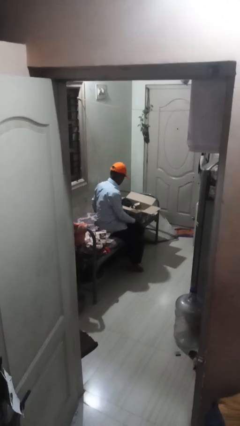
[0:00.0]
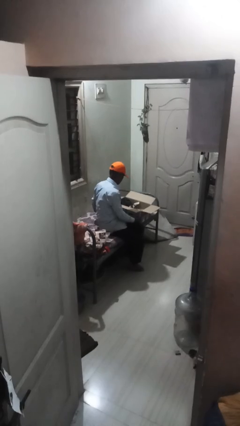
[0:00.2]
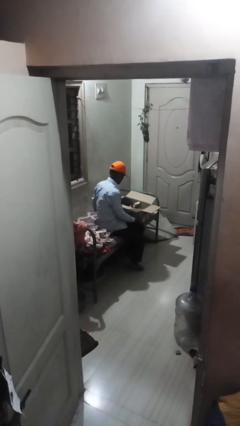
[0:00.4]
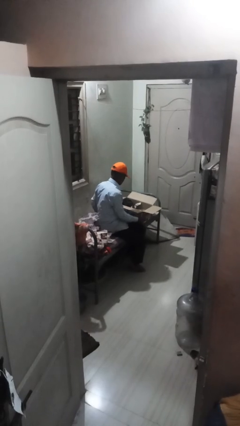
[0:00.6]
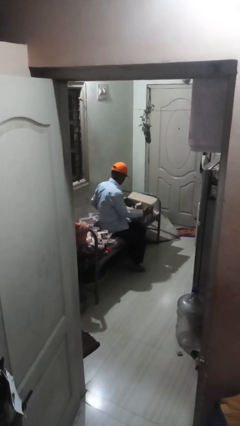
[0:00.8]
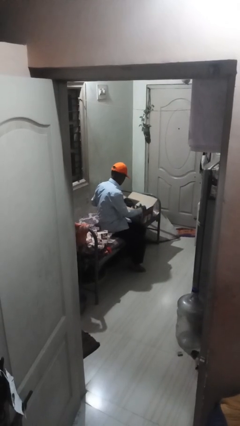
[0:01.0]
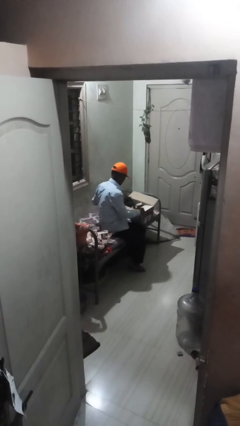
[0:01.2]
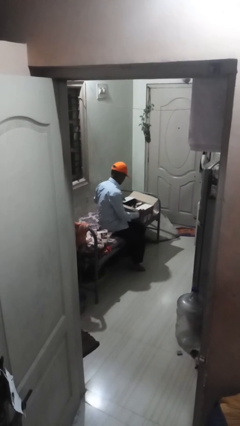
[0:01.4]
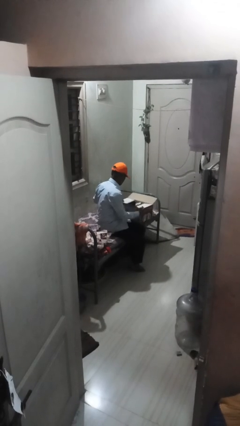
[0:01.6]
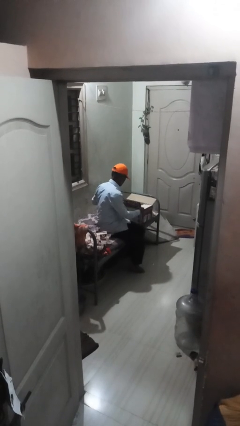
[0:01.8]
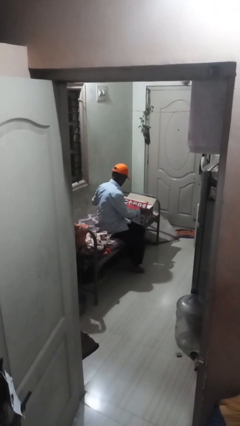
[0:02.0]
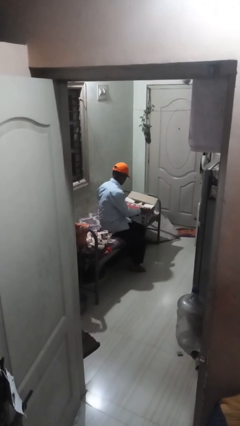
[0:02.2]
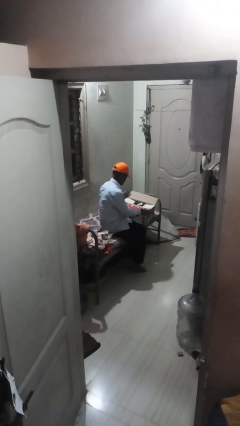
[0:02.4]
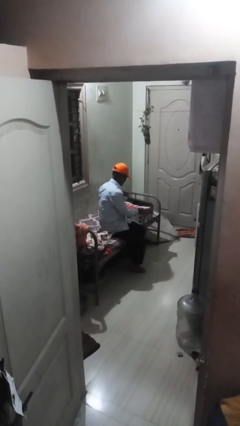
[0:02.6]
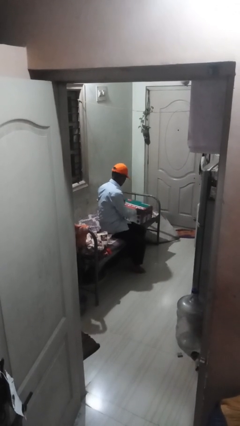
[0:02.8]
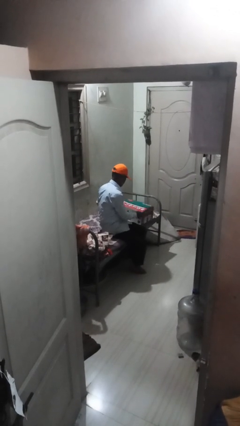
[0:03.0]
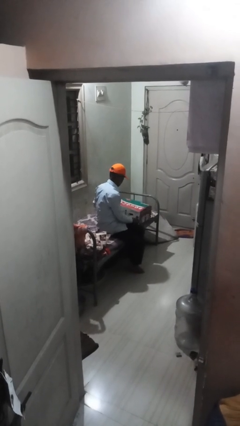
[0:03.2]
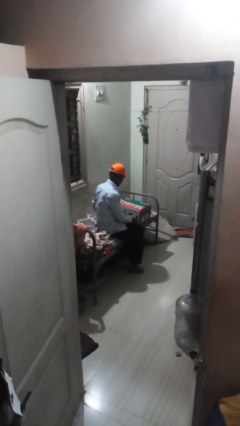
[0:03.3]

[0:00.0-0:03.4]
person closes box

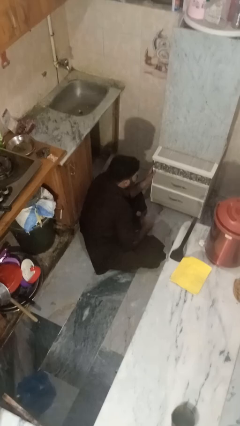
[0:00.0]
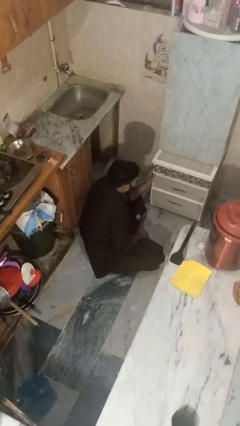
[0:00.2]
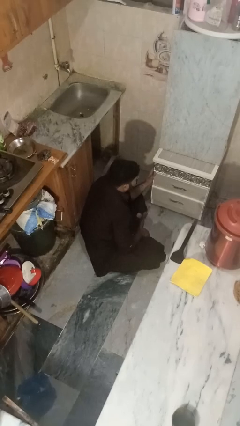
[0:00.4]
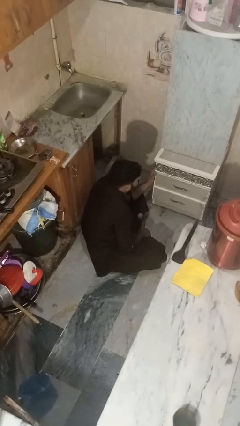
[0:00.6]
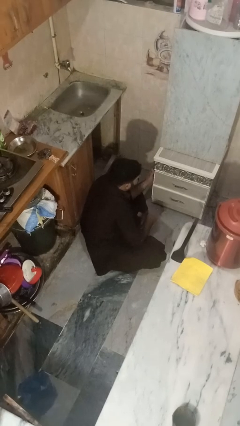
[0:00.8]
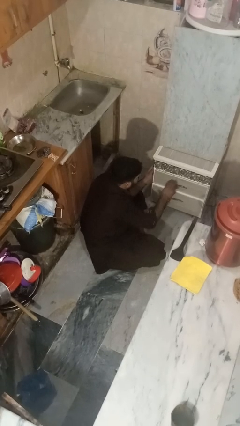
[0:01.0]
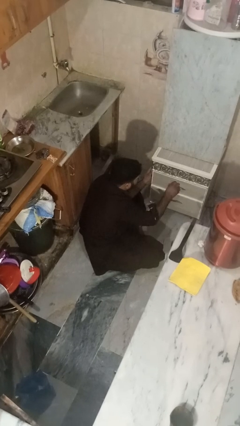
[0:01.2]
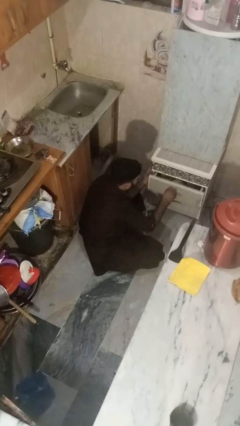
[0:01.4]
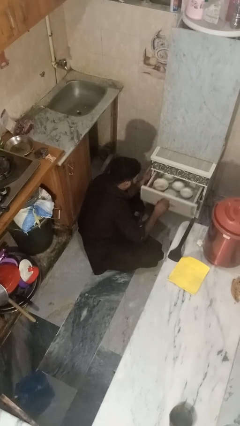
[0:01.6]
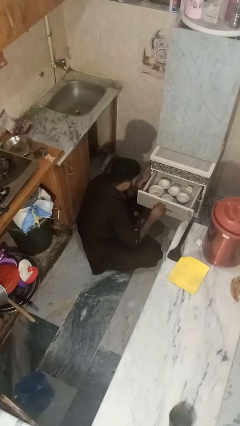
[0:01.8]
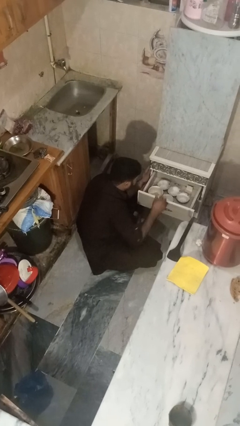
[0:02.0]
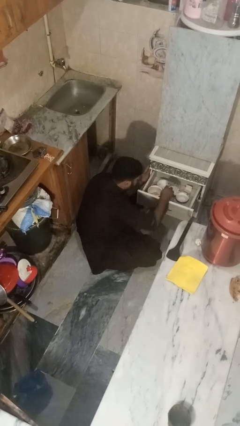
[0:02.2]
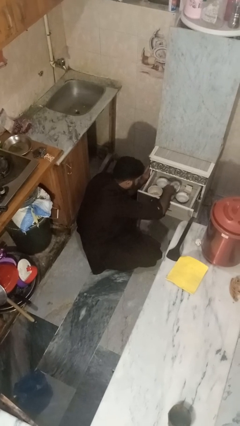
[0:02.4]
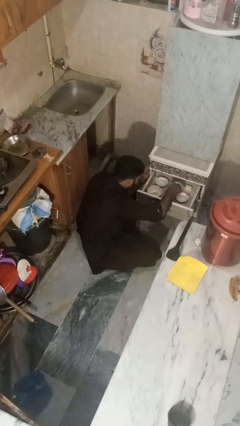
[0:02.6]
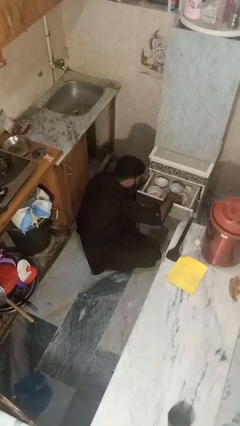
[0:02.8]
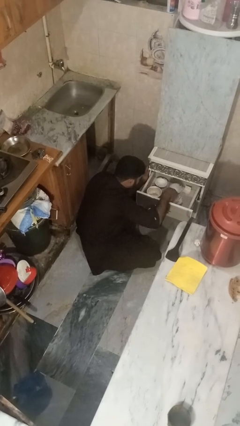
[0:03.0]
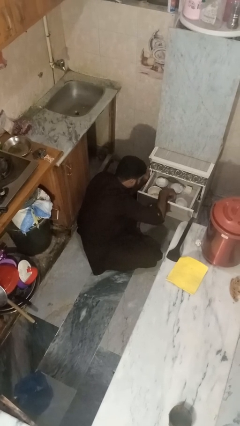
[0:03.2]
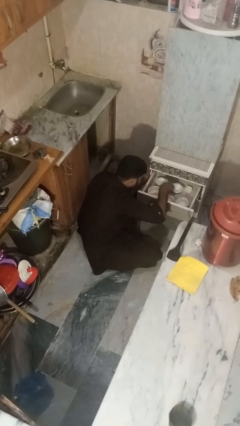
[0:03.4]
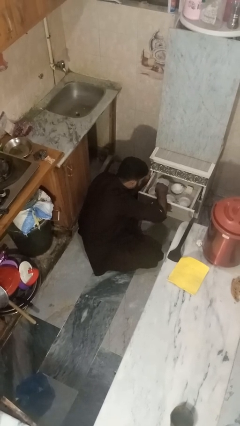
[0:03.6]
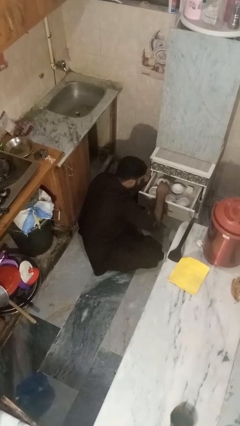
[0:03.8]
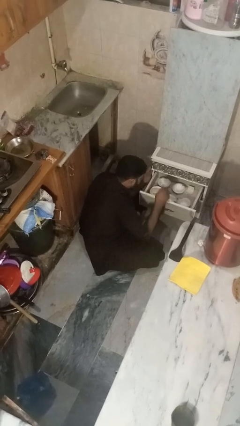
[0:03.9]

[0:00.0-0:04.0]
person searches in kitchen drawer

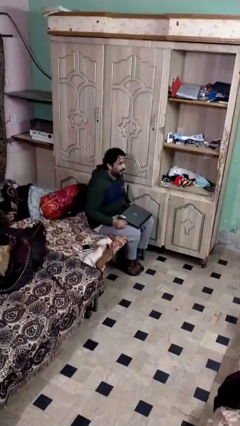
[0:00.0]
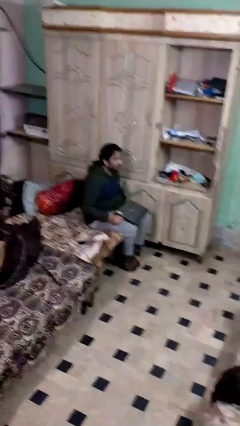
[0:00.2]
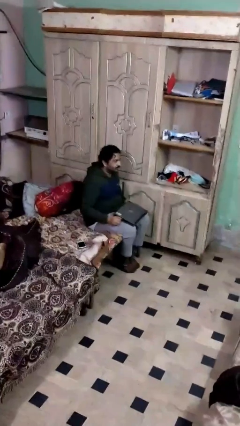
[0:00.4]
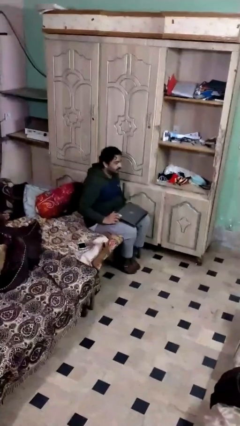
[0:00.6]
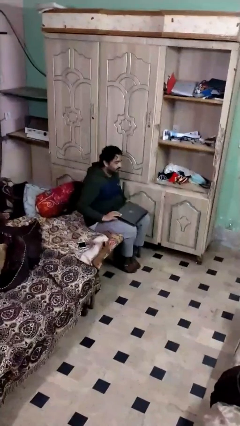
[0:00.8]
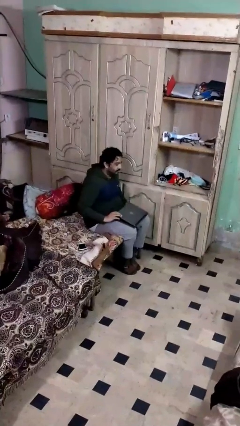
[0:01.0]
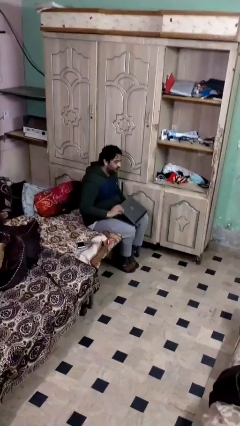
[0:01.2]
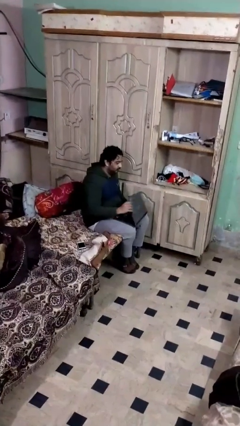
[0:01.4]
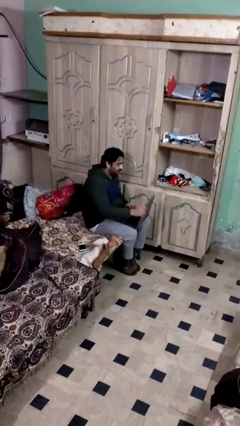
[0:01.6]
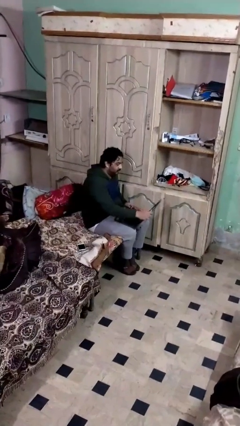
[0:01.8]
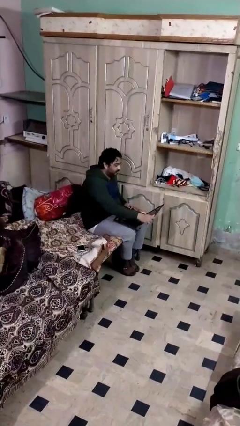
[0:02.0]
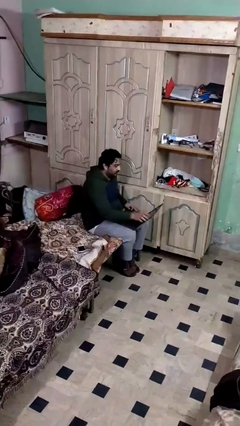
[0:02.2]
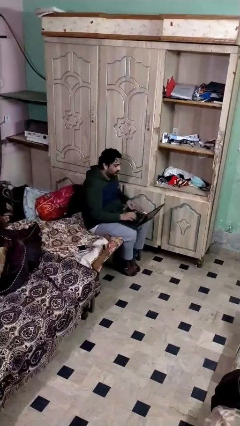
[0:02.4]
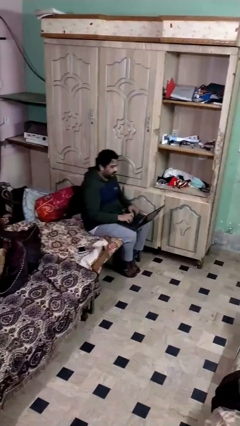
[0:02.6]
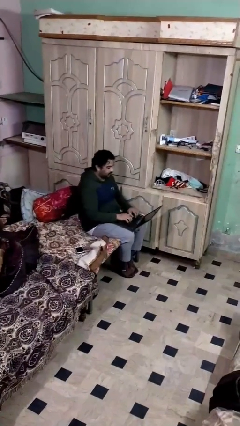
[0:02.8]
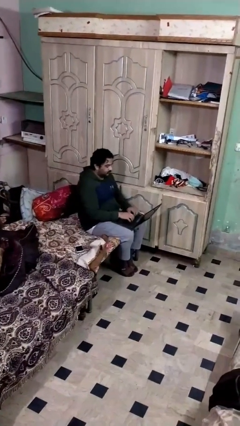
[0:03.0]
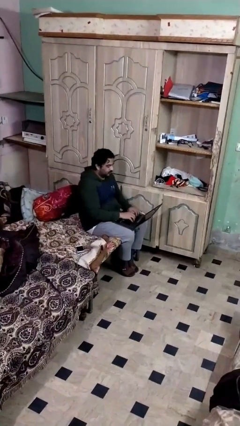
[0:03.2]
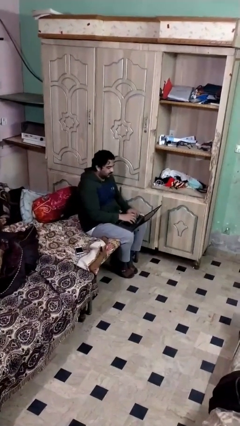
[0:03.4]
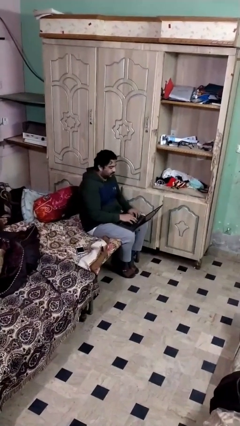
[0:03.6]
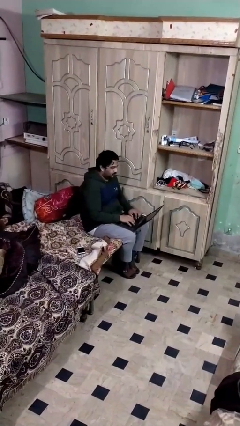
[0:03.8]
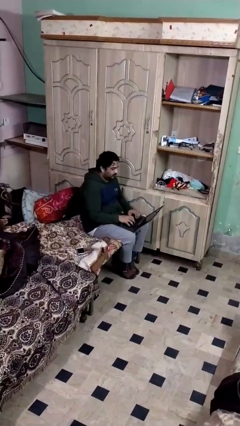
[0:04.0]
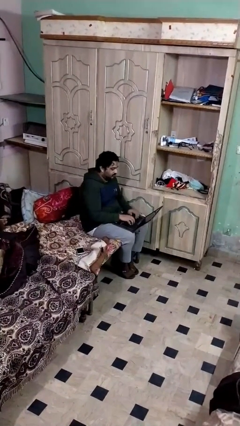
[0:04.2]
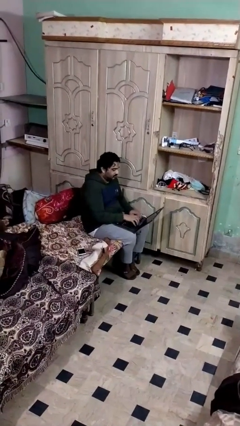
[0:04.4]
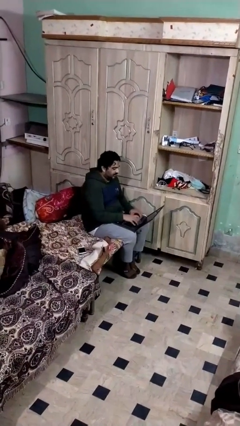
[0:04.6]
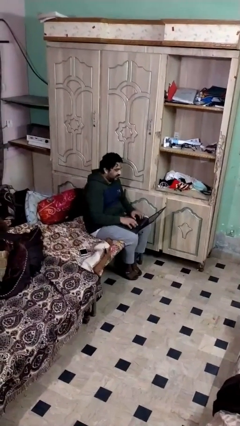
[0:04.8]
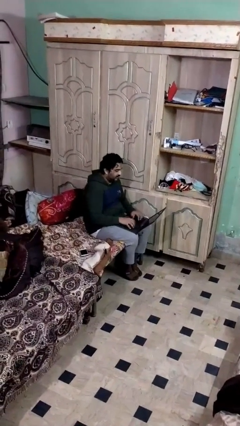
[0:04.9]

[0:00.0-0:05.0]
person interacts with laptop

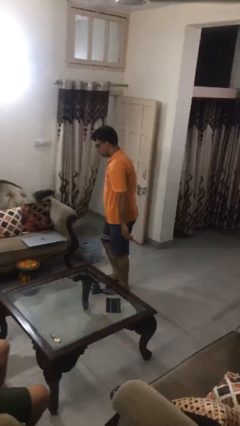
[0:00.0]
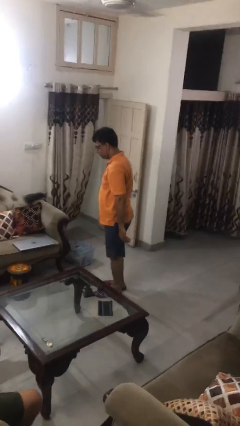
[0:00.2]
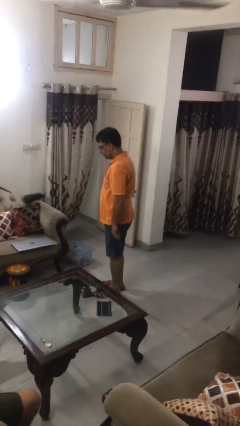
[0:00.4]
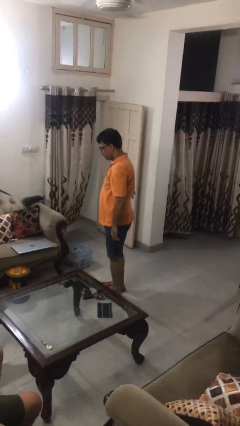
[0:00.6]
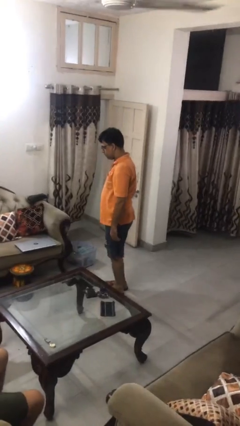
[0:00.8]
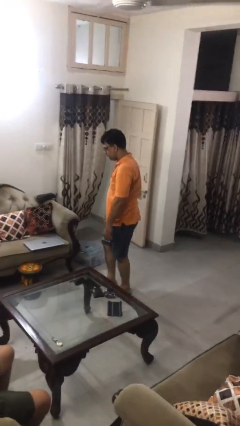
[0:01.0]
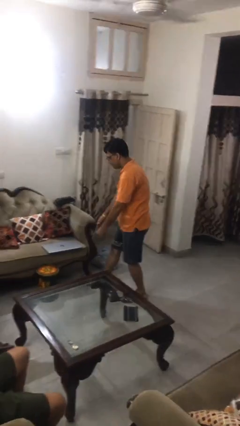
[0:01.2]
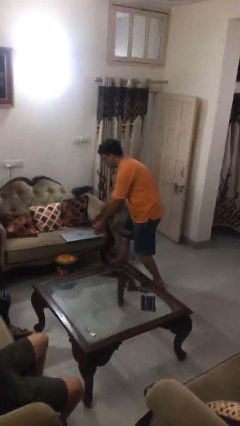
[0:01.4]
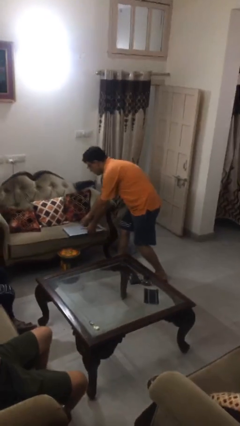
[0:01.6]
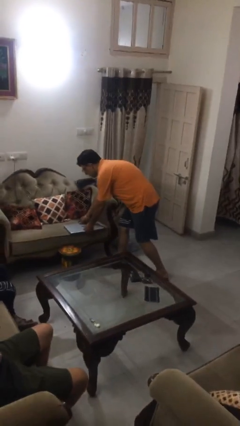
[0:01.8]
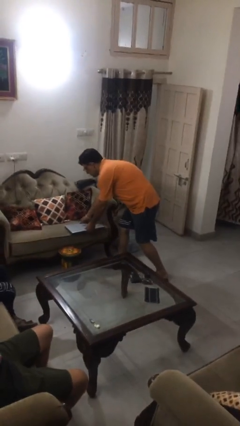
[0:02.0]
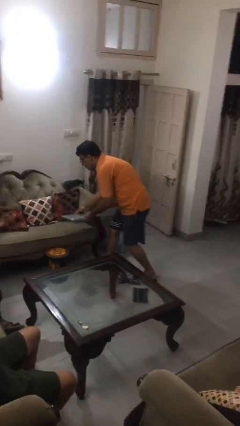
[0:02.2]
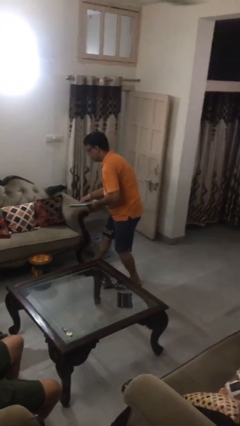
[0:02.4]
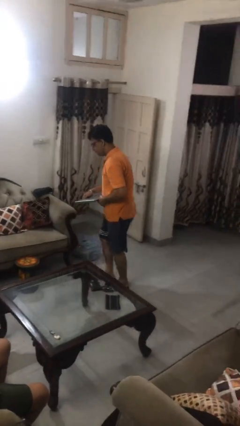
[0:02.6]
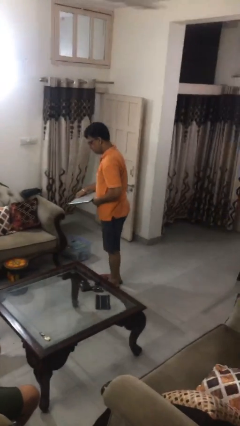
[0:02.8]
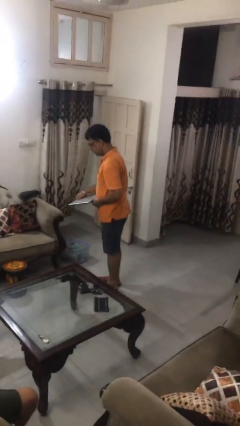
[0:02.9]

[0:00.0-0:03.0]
person picks up object from couch

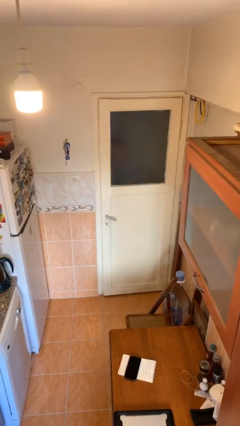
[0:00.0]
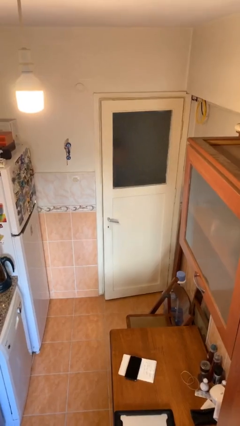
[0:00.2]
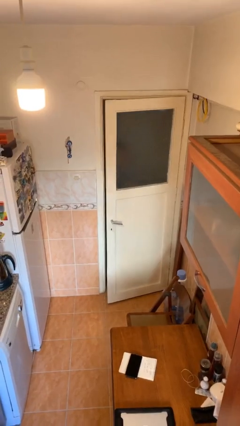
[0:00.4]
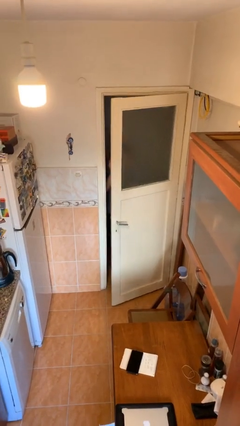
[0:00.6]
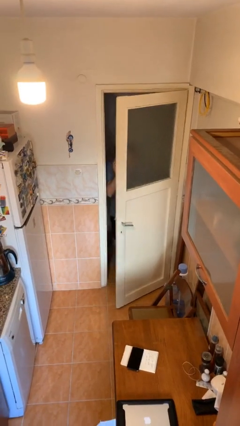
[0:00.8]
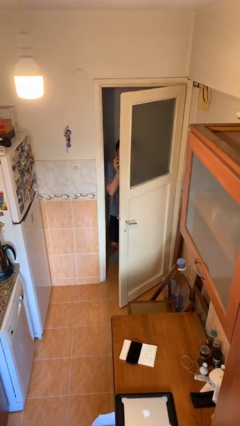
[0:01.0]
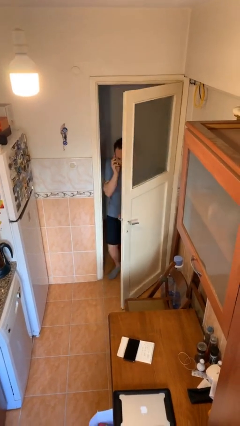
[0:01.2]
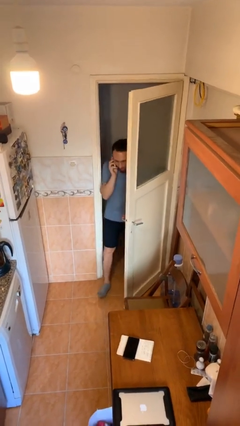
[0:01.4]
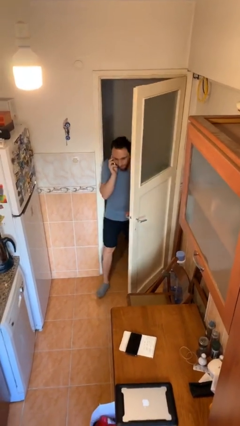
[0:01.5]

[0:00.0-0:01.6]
person opens facility door

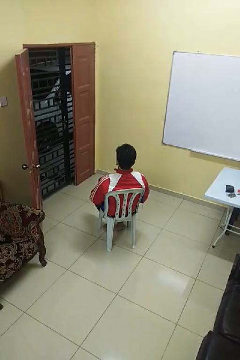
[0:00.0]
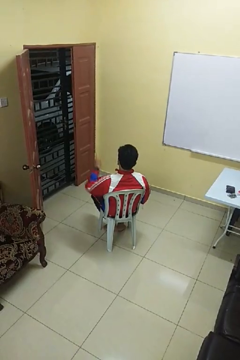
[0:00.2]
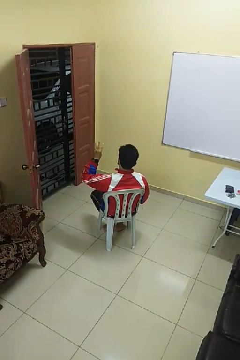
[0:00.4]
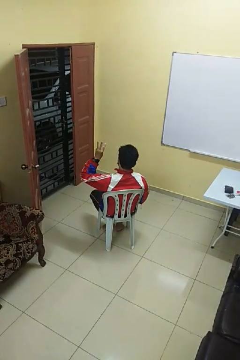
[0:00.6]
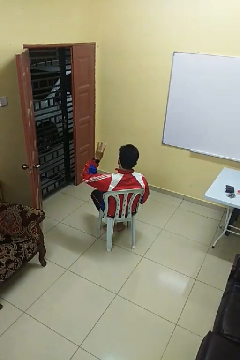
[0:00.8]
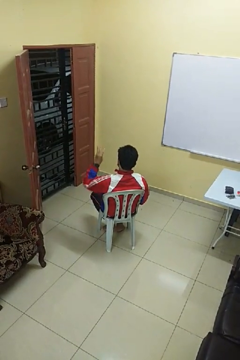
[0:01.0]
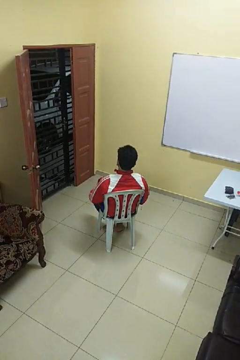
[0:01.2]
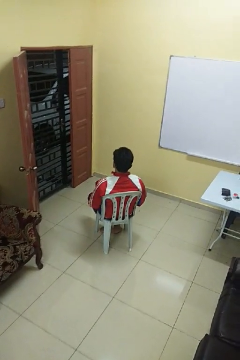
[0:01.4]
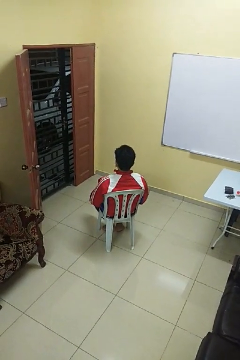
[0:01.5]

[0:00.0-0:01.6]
person gestures number three
